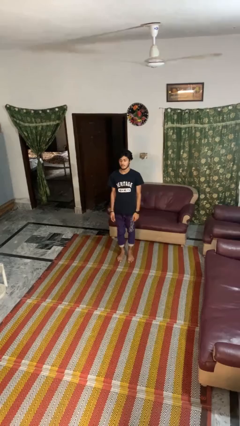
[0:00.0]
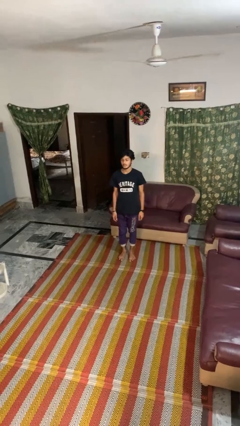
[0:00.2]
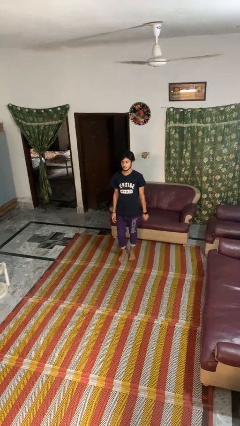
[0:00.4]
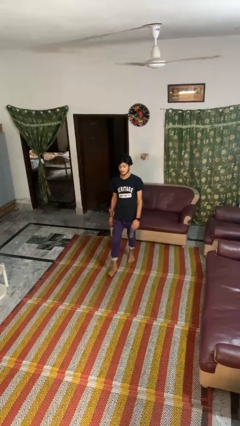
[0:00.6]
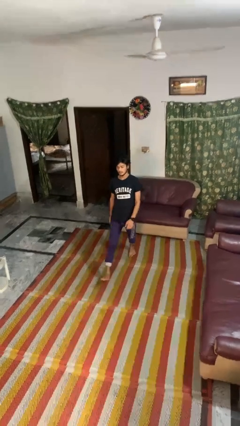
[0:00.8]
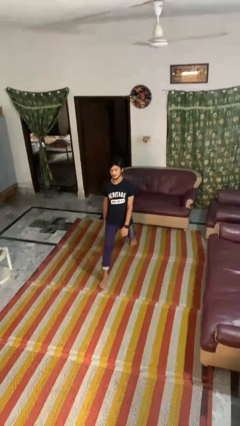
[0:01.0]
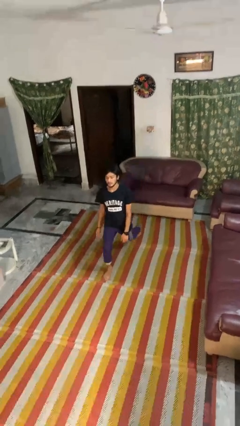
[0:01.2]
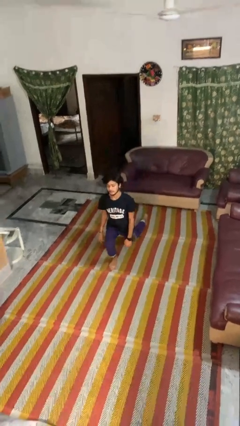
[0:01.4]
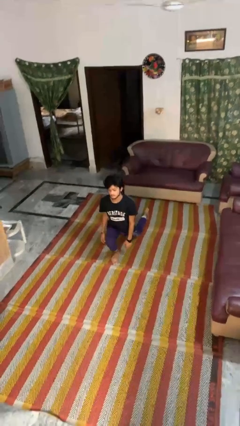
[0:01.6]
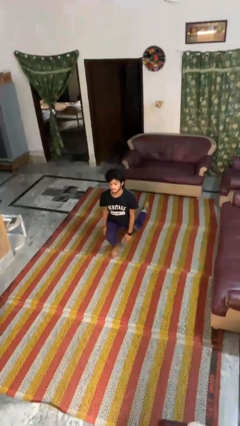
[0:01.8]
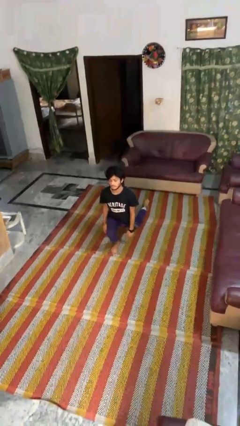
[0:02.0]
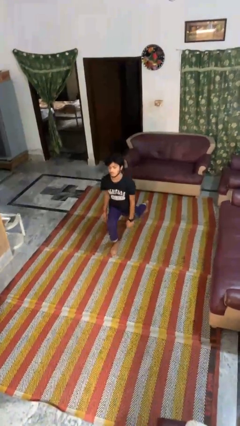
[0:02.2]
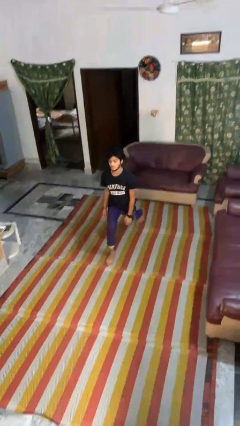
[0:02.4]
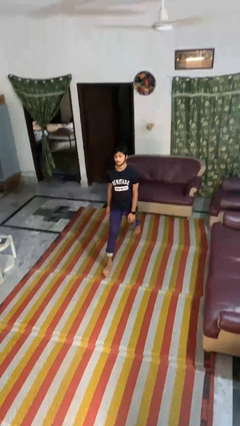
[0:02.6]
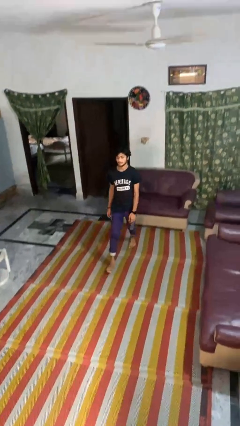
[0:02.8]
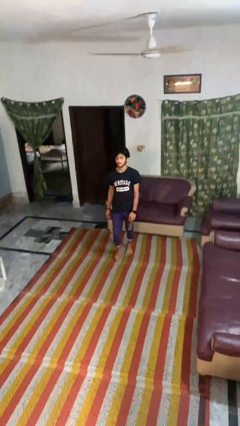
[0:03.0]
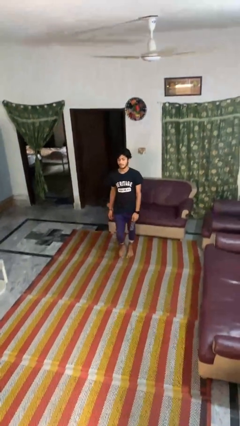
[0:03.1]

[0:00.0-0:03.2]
person exercises with lunges

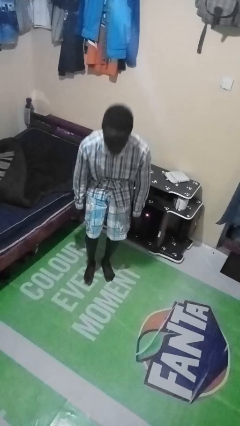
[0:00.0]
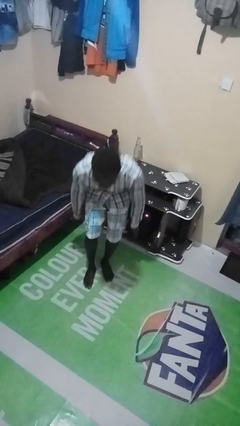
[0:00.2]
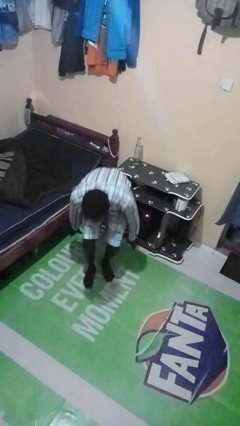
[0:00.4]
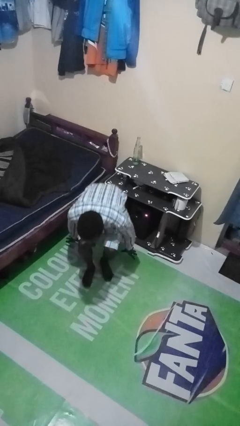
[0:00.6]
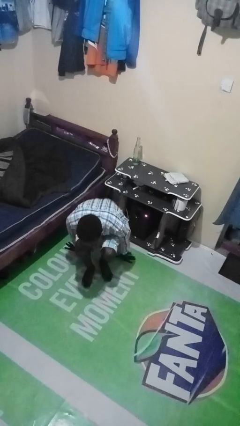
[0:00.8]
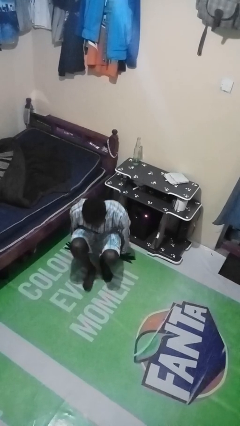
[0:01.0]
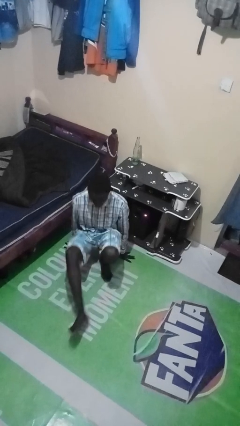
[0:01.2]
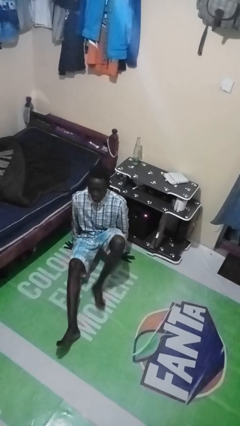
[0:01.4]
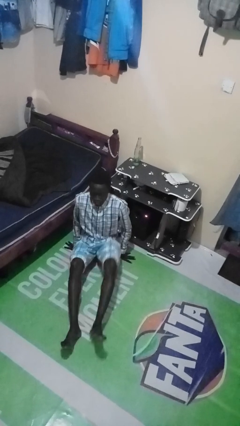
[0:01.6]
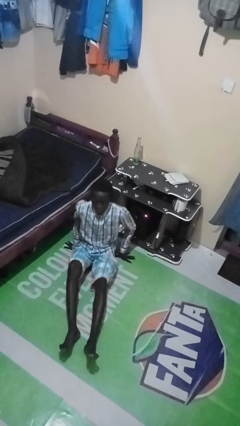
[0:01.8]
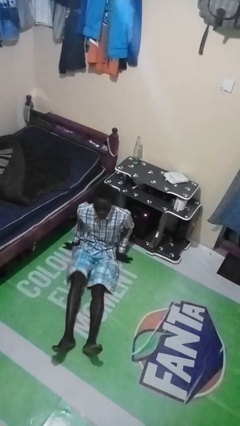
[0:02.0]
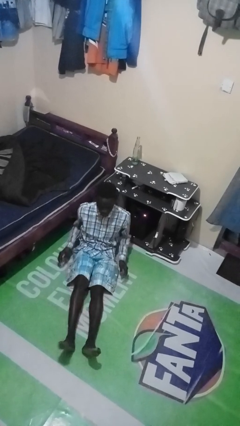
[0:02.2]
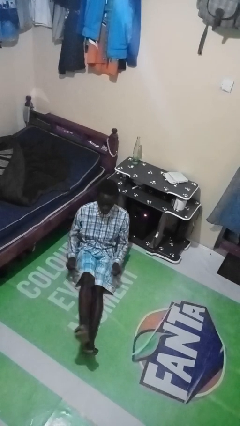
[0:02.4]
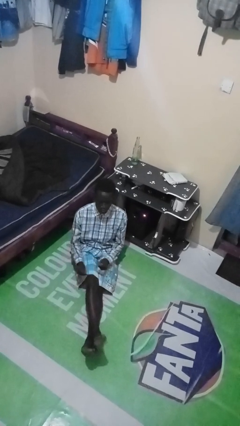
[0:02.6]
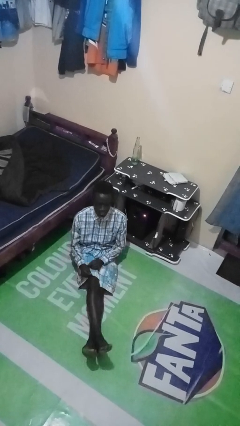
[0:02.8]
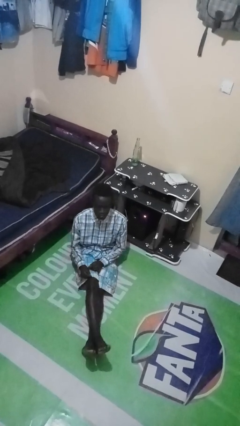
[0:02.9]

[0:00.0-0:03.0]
person sits crisscross

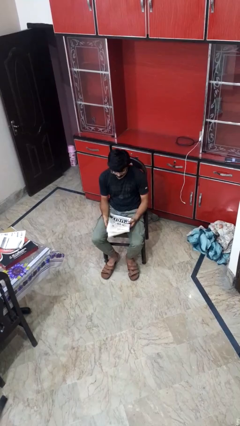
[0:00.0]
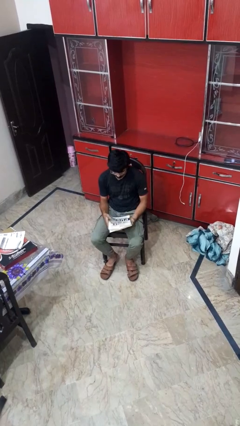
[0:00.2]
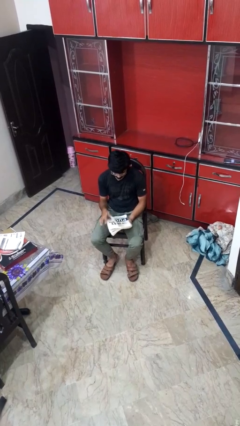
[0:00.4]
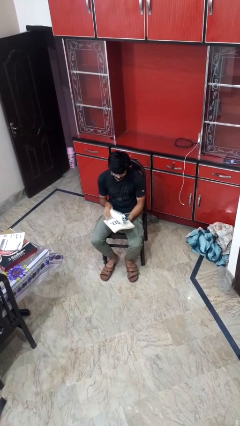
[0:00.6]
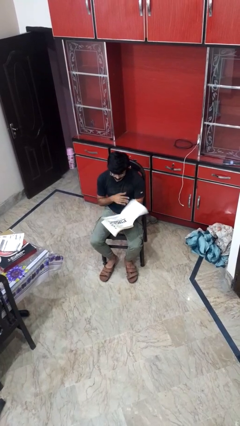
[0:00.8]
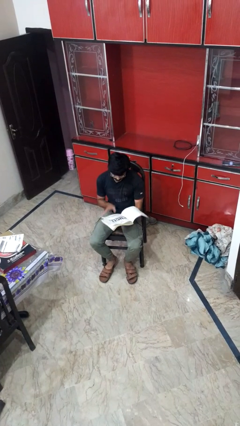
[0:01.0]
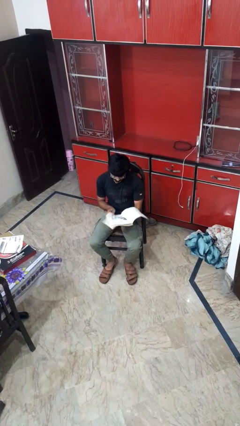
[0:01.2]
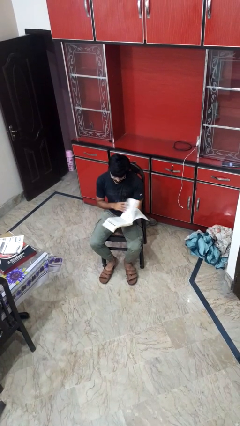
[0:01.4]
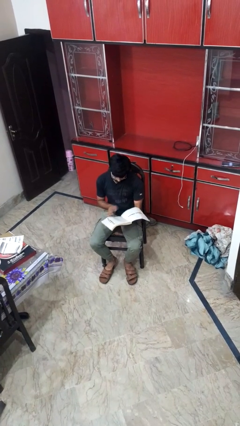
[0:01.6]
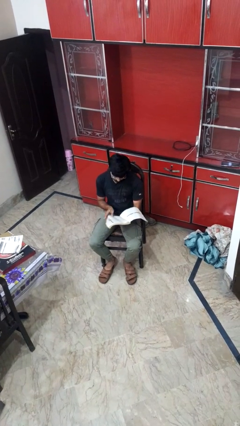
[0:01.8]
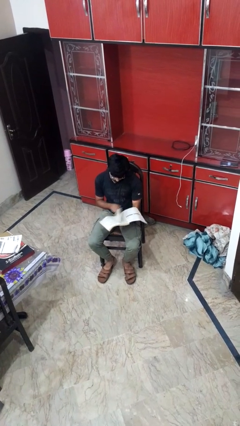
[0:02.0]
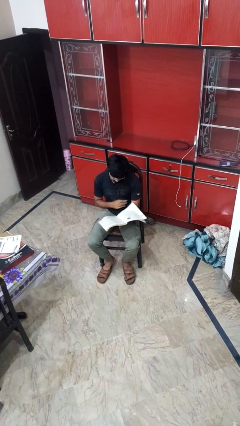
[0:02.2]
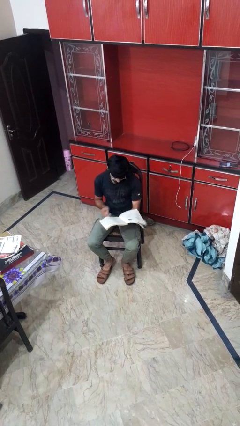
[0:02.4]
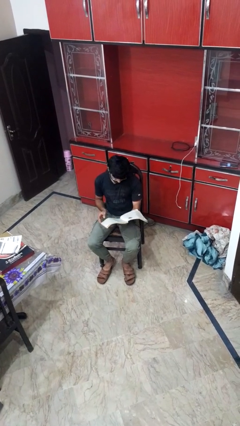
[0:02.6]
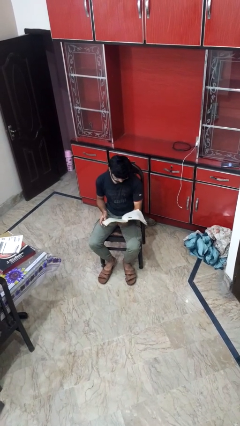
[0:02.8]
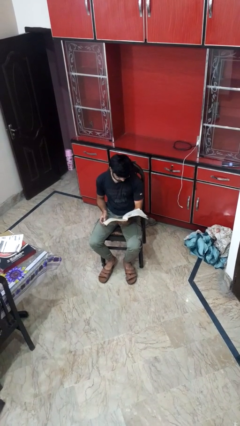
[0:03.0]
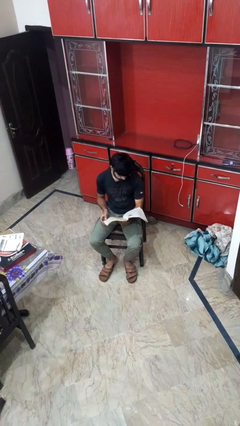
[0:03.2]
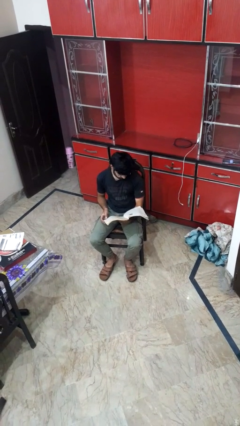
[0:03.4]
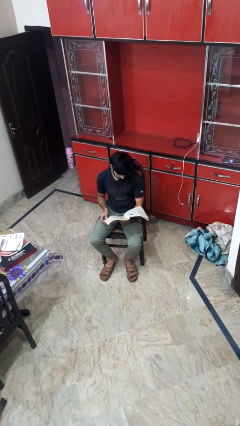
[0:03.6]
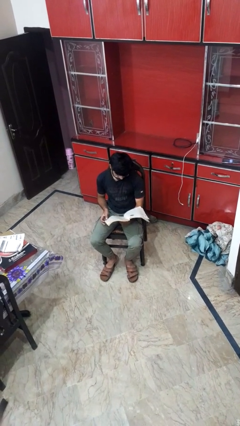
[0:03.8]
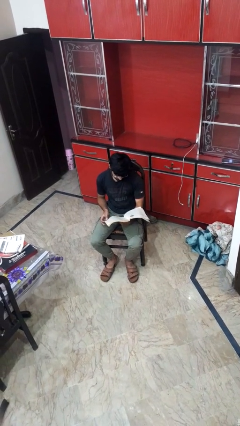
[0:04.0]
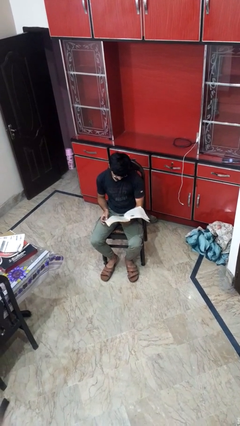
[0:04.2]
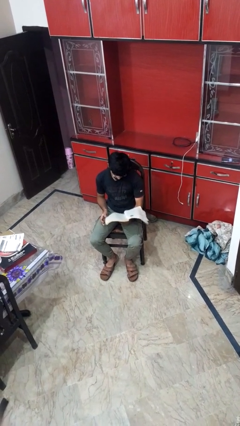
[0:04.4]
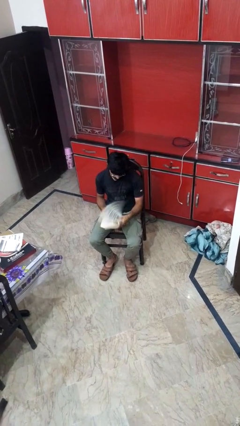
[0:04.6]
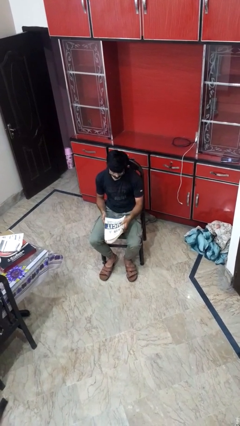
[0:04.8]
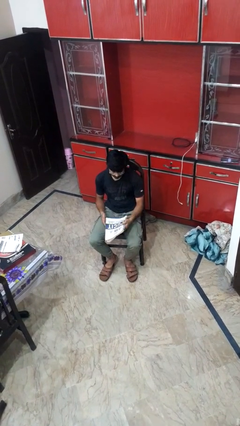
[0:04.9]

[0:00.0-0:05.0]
person reads magazine

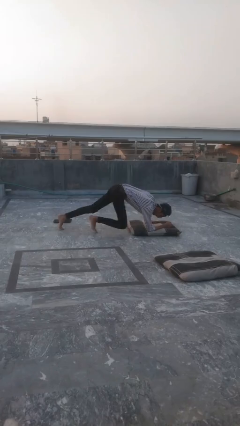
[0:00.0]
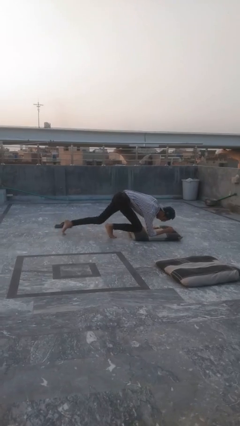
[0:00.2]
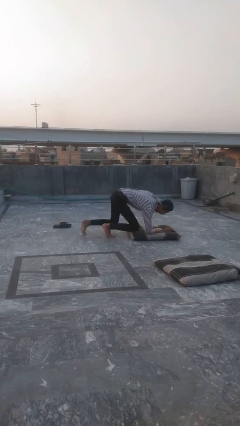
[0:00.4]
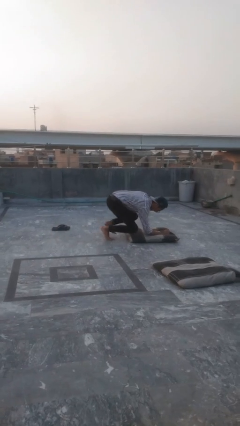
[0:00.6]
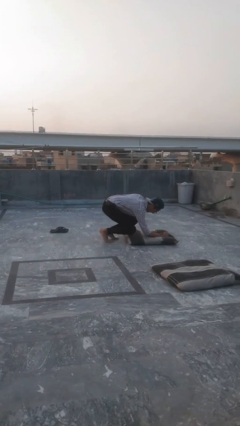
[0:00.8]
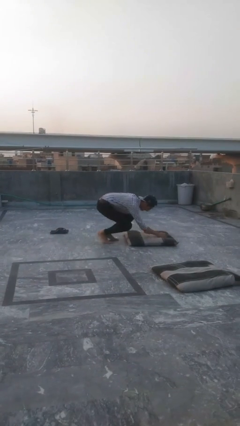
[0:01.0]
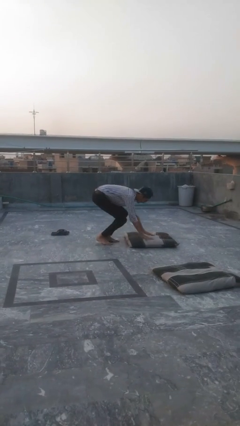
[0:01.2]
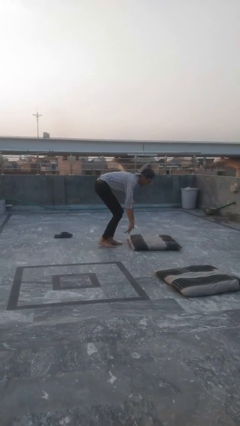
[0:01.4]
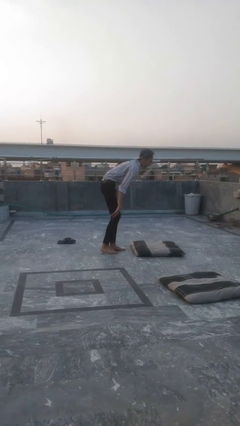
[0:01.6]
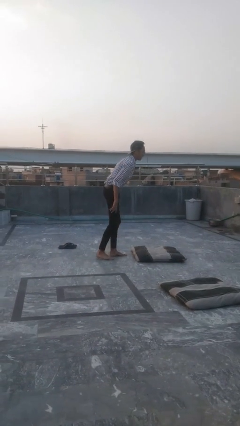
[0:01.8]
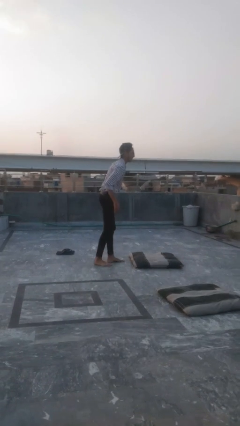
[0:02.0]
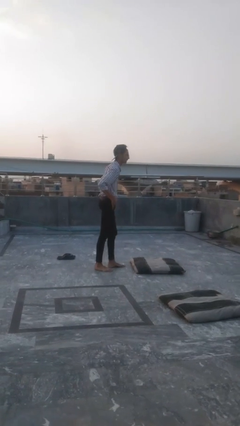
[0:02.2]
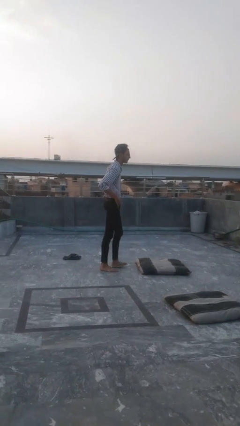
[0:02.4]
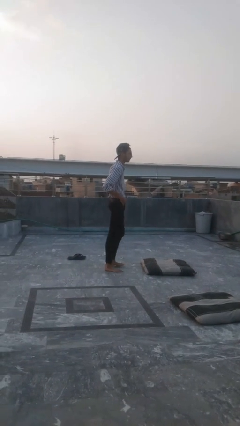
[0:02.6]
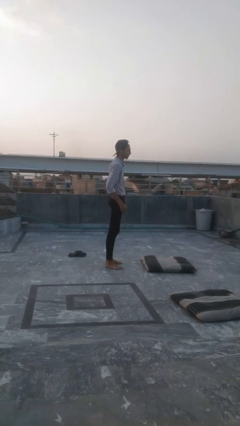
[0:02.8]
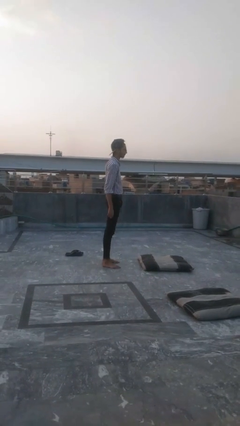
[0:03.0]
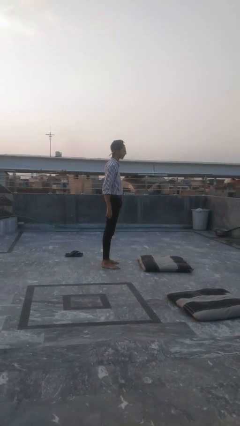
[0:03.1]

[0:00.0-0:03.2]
person stands up from floor

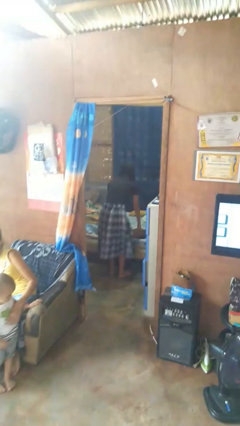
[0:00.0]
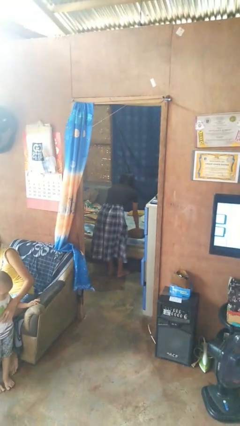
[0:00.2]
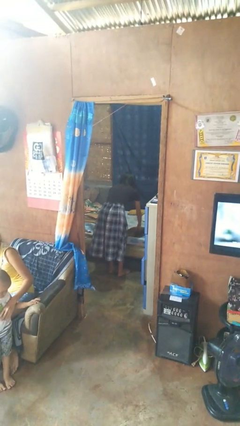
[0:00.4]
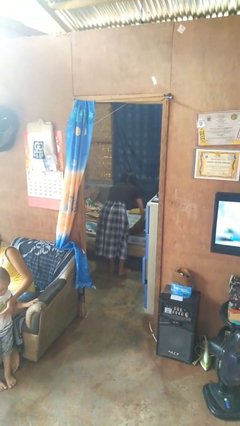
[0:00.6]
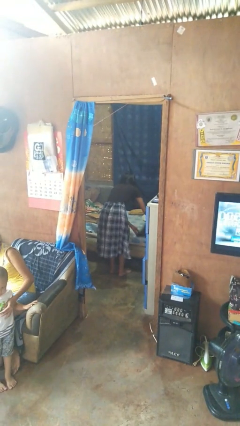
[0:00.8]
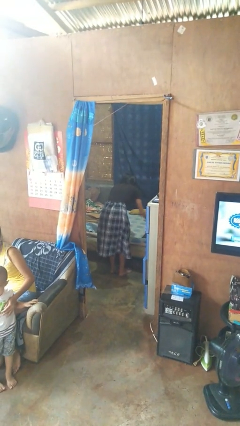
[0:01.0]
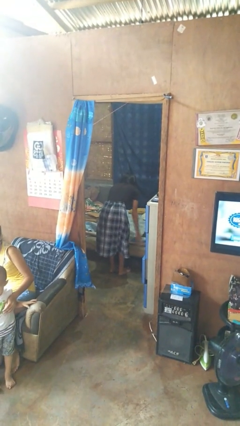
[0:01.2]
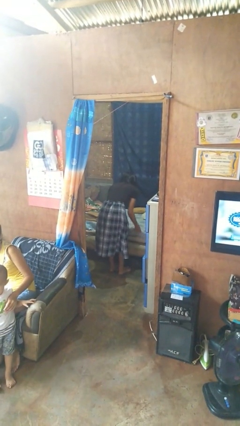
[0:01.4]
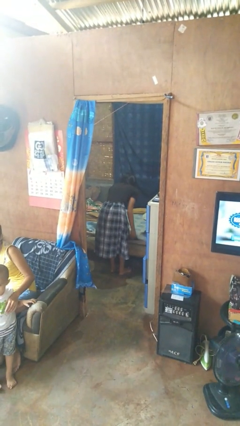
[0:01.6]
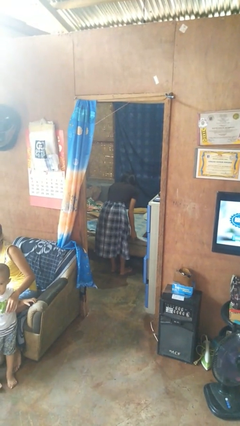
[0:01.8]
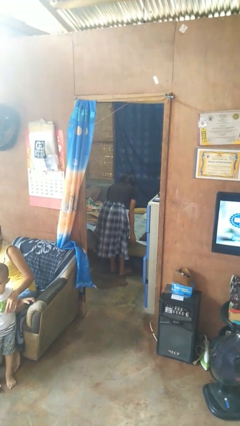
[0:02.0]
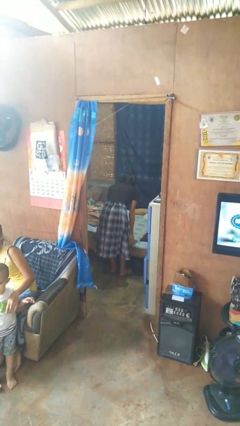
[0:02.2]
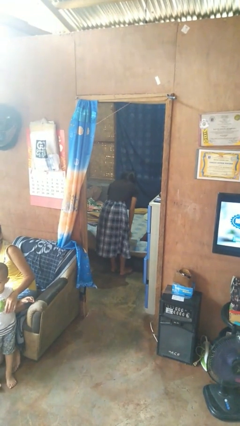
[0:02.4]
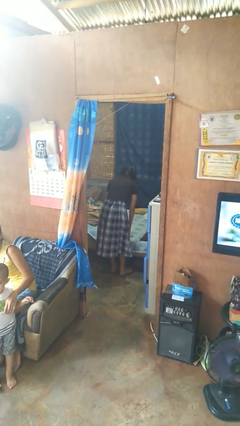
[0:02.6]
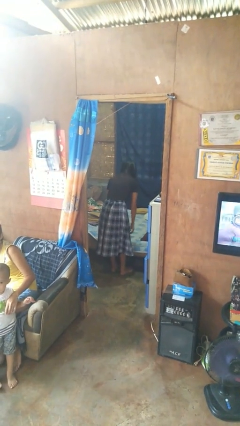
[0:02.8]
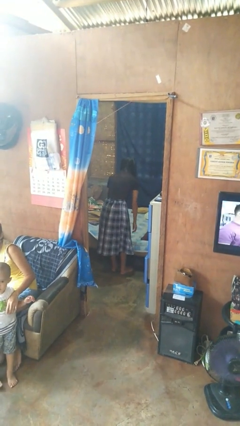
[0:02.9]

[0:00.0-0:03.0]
person makes bed
